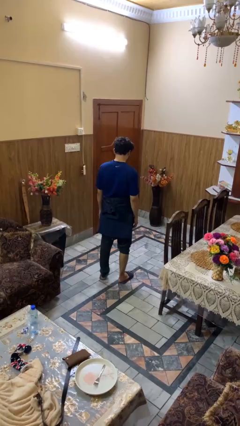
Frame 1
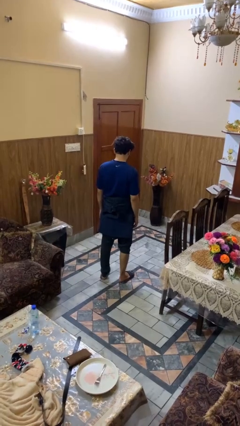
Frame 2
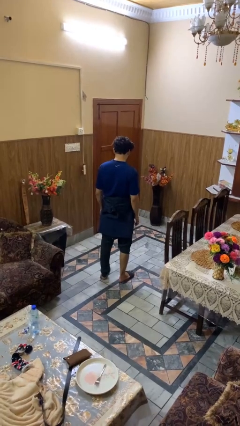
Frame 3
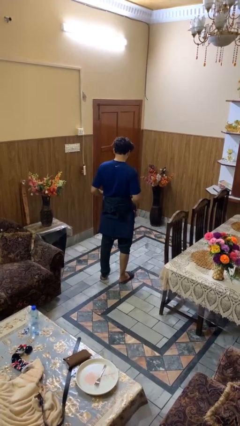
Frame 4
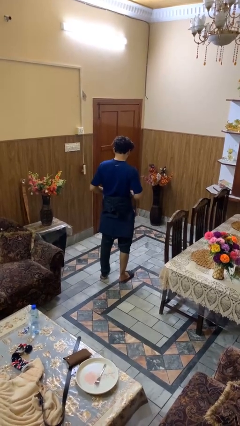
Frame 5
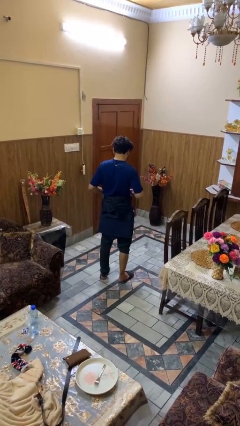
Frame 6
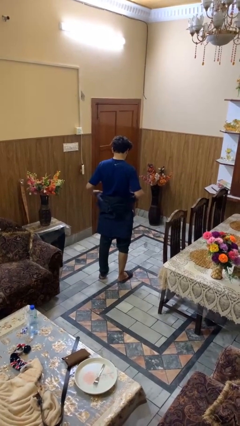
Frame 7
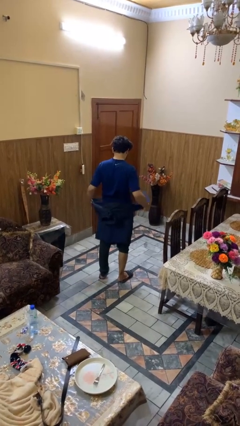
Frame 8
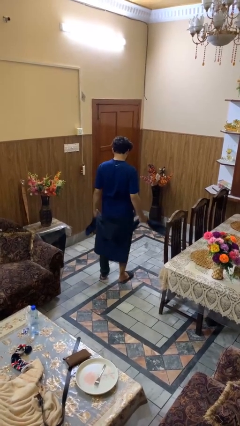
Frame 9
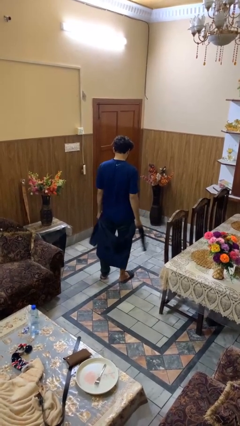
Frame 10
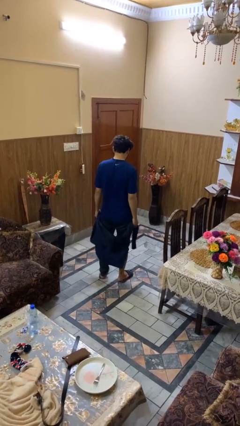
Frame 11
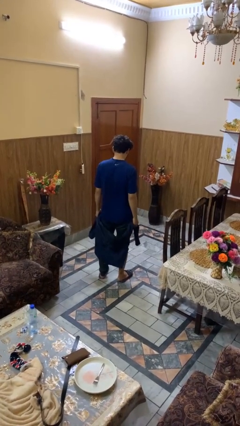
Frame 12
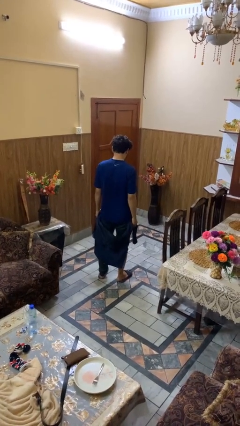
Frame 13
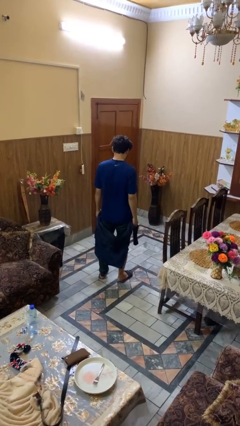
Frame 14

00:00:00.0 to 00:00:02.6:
person unties jacket around waist

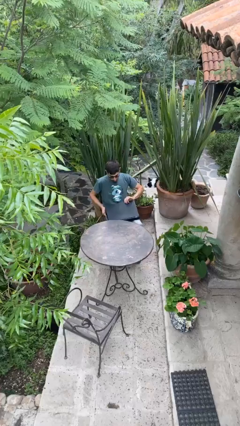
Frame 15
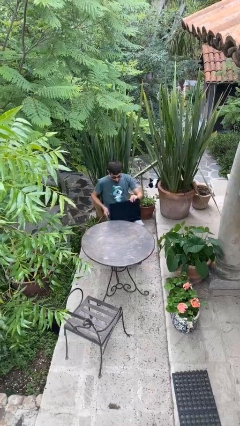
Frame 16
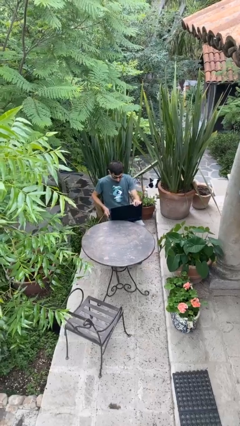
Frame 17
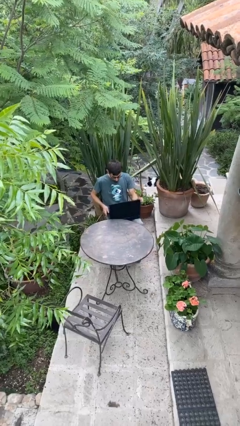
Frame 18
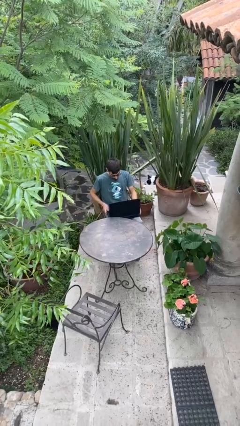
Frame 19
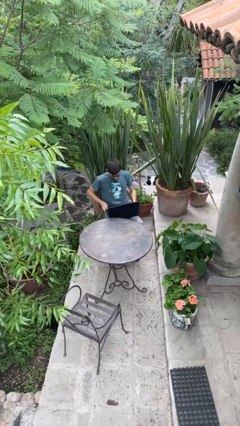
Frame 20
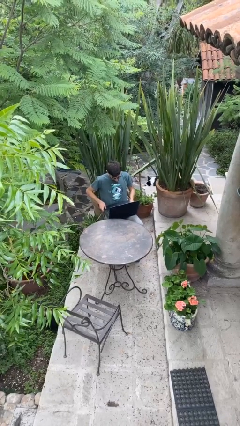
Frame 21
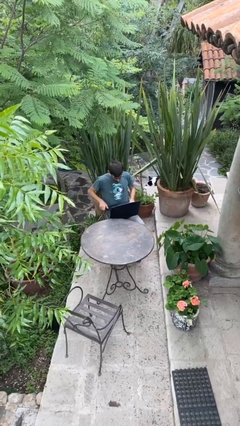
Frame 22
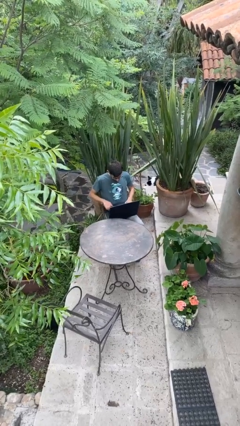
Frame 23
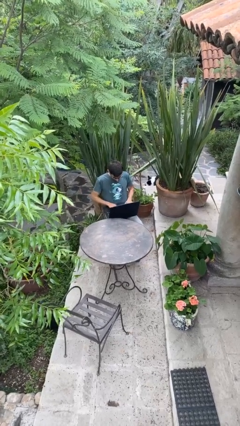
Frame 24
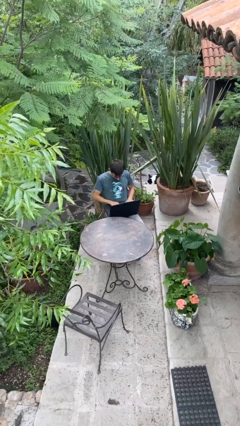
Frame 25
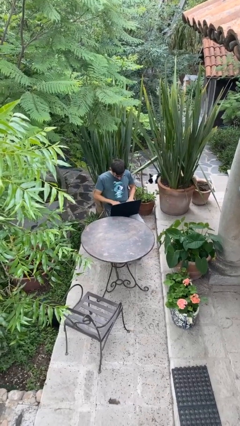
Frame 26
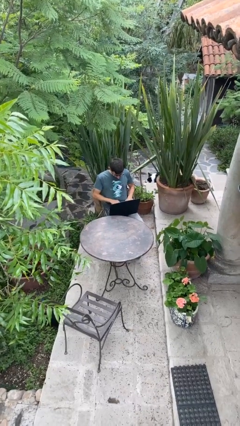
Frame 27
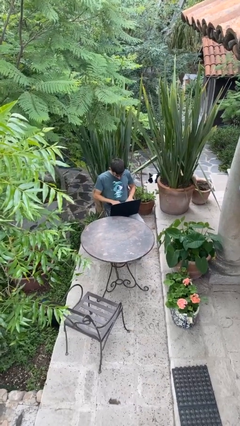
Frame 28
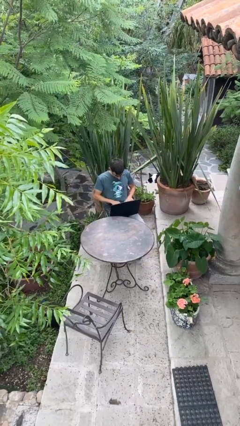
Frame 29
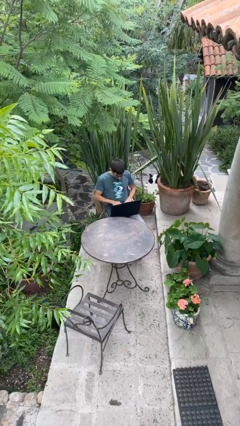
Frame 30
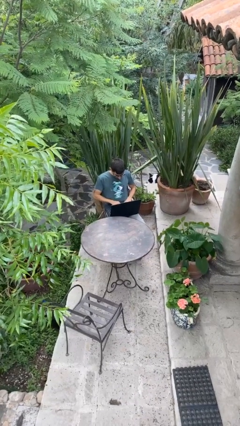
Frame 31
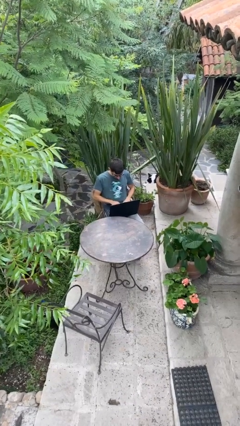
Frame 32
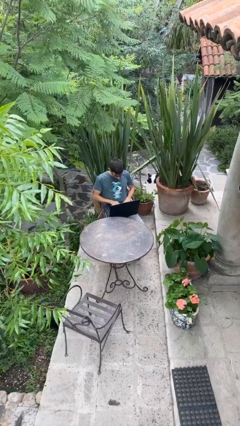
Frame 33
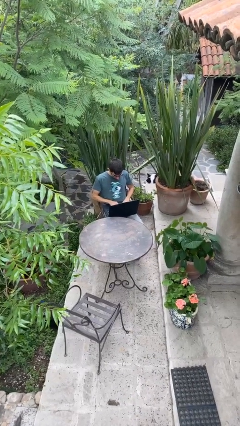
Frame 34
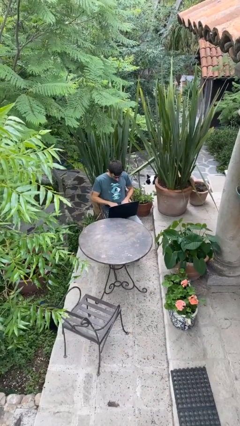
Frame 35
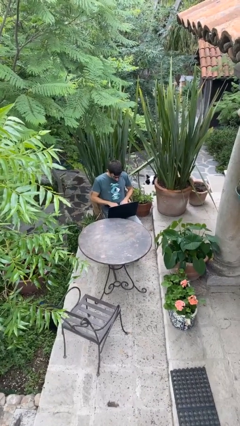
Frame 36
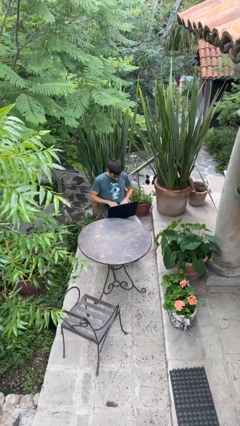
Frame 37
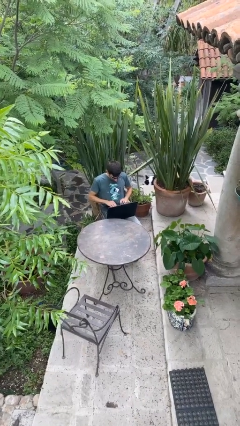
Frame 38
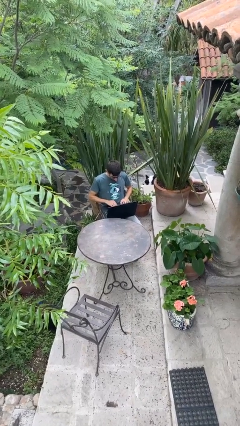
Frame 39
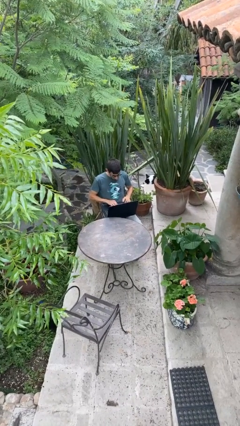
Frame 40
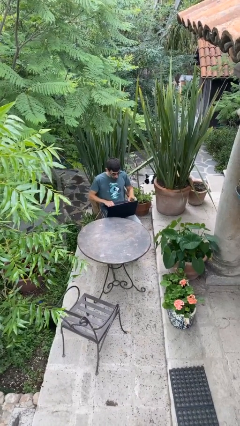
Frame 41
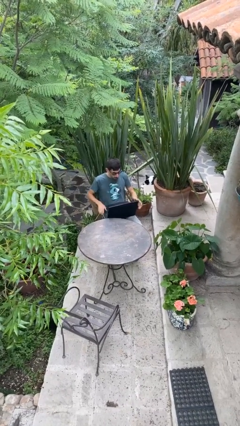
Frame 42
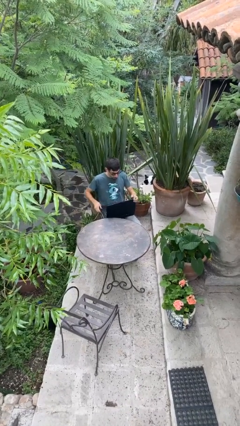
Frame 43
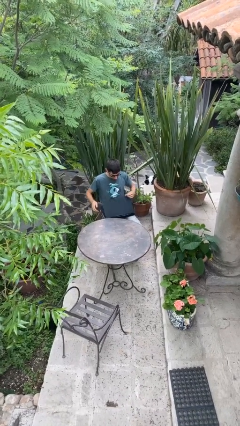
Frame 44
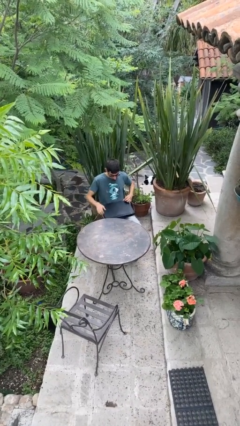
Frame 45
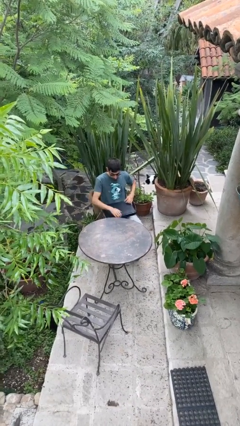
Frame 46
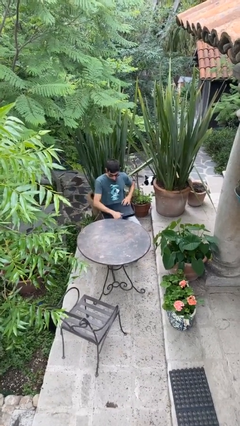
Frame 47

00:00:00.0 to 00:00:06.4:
person interacts with laptop

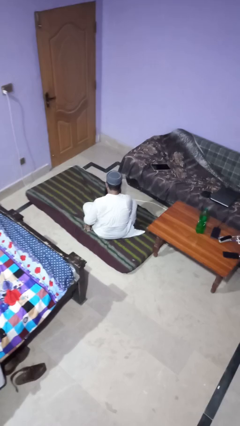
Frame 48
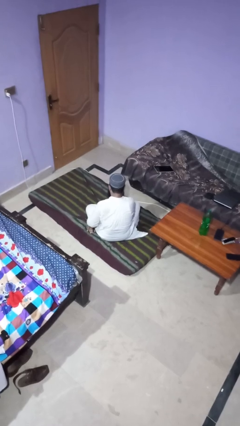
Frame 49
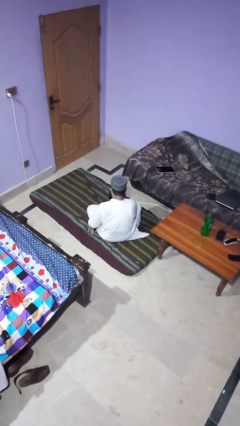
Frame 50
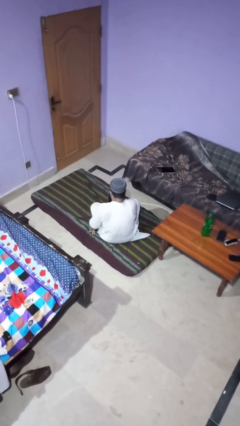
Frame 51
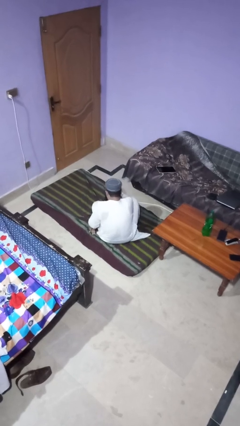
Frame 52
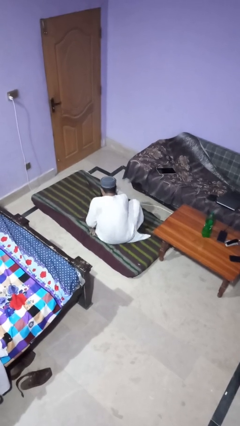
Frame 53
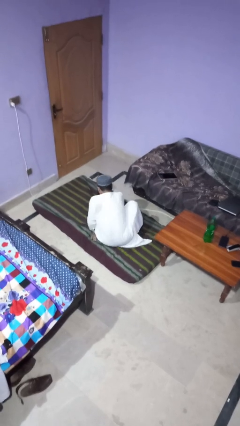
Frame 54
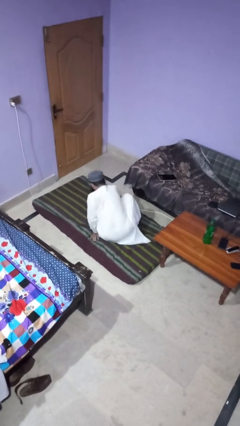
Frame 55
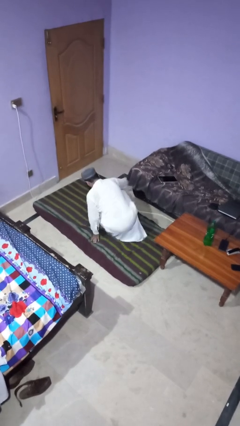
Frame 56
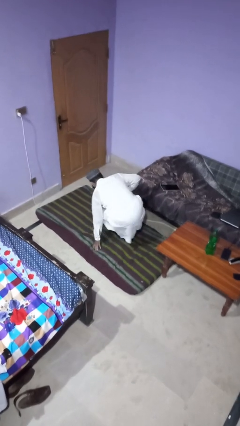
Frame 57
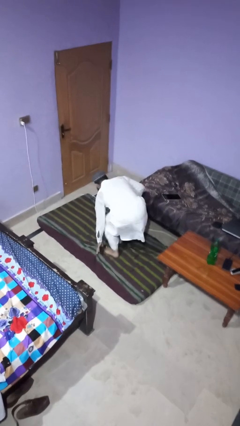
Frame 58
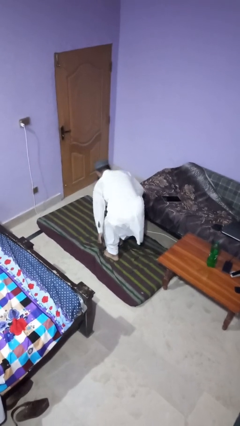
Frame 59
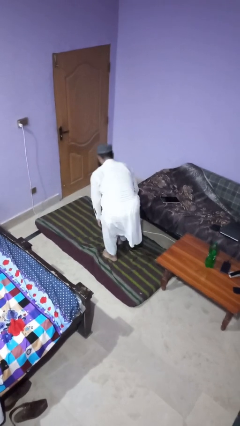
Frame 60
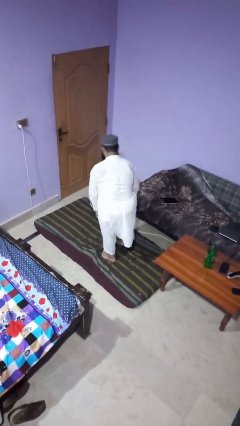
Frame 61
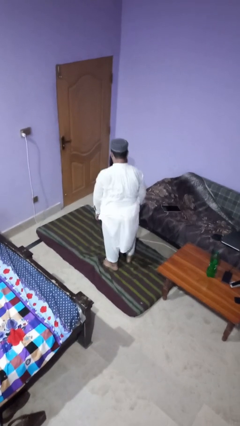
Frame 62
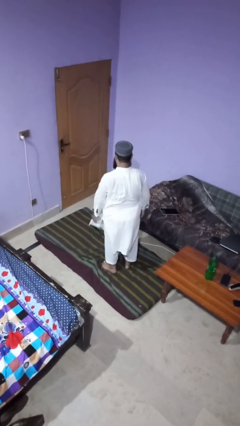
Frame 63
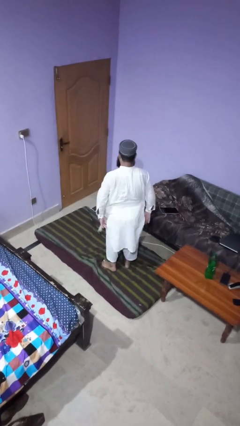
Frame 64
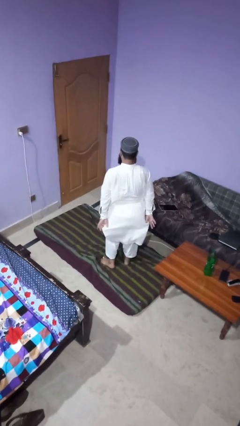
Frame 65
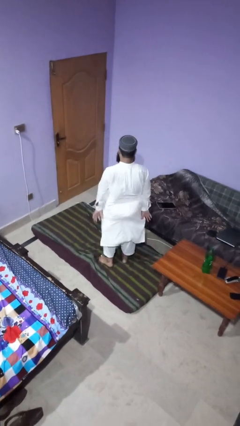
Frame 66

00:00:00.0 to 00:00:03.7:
person stands up from floor

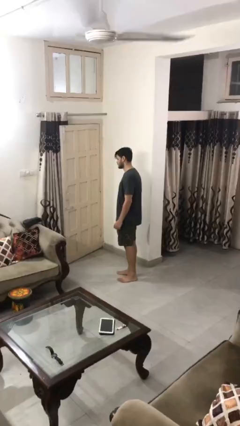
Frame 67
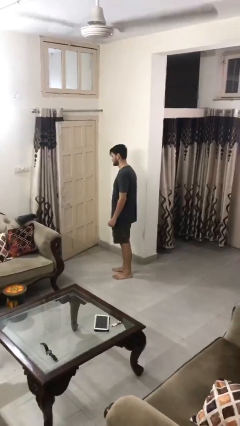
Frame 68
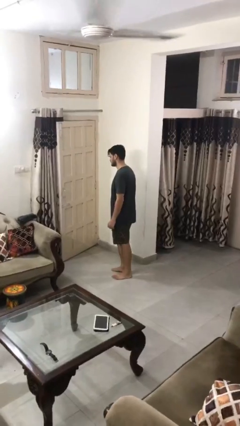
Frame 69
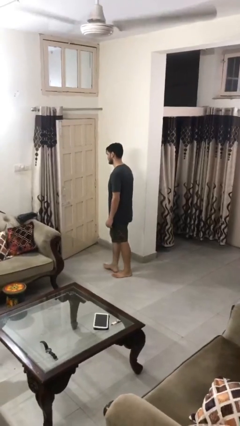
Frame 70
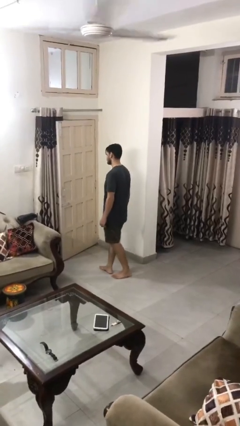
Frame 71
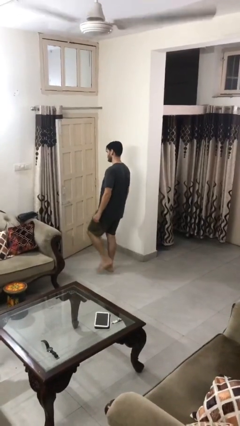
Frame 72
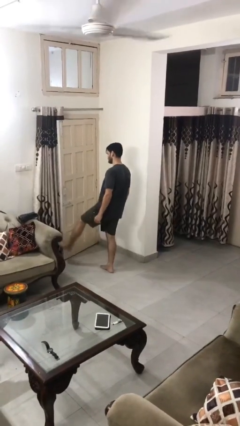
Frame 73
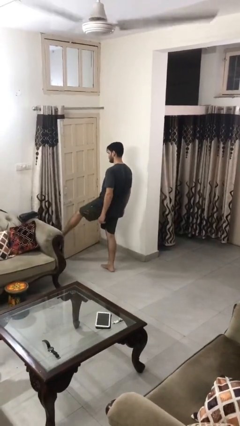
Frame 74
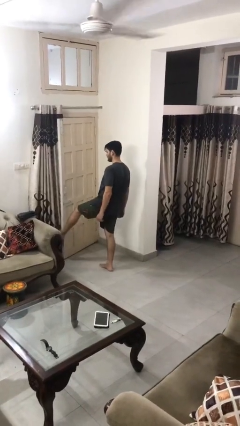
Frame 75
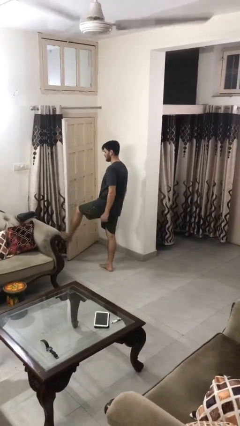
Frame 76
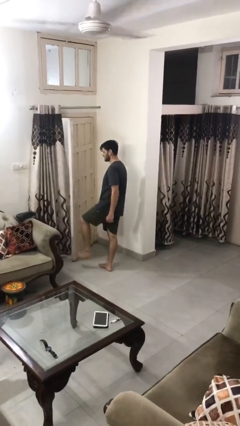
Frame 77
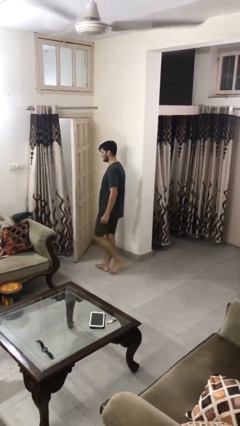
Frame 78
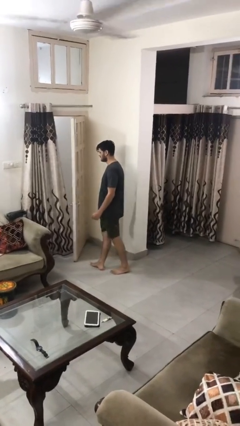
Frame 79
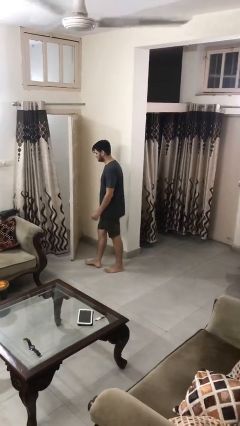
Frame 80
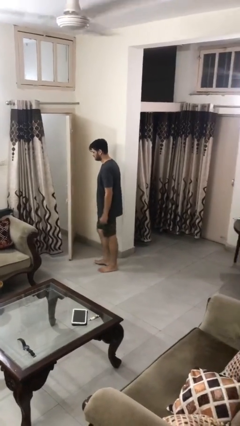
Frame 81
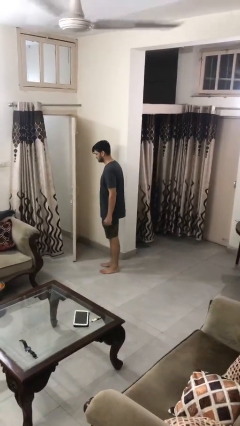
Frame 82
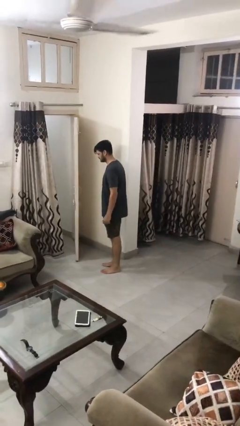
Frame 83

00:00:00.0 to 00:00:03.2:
person opens facility door

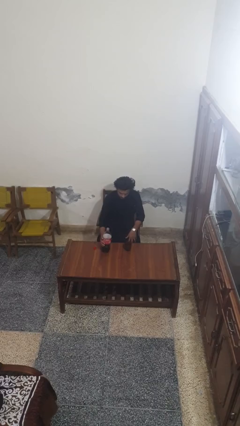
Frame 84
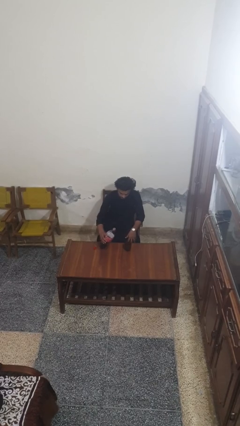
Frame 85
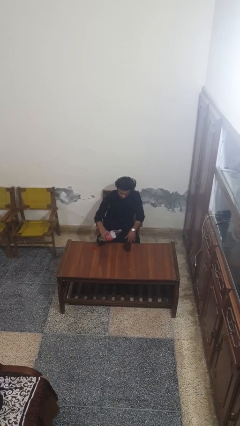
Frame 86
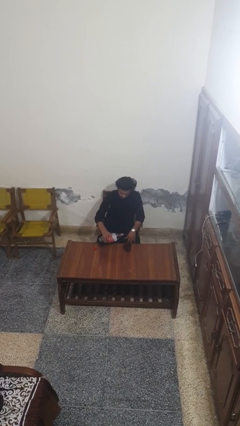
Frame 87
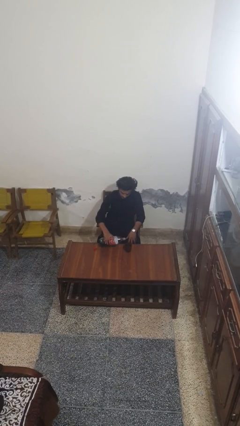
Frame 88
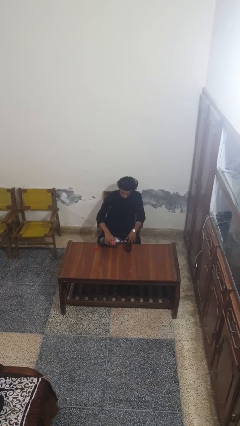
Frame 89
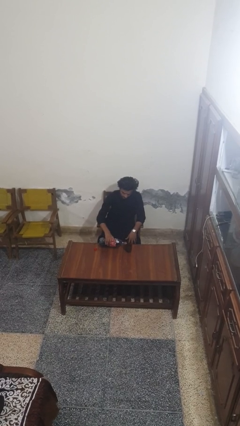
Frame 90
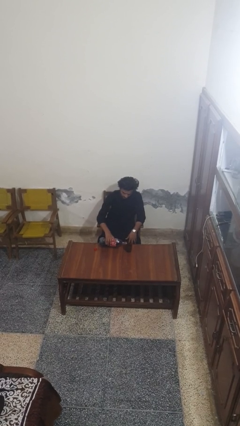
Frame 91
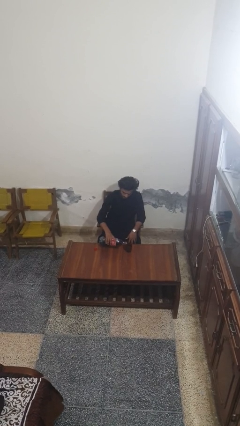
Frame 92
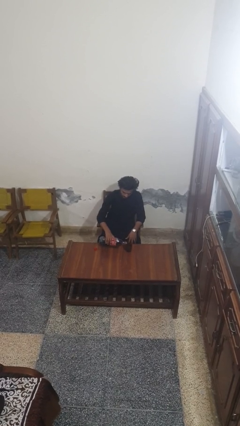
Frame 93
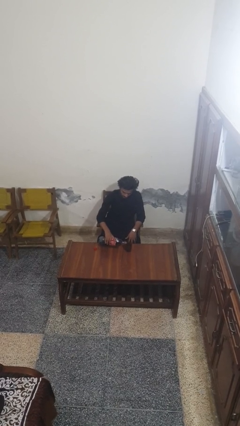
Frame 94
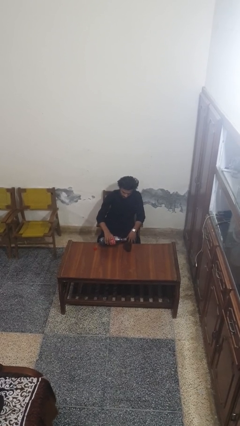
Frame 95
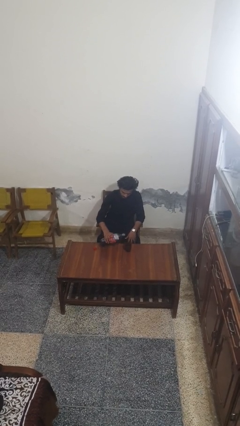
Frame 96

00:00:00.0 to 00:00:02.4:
person pours liquid into cup
